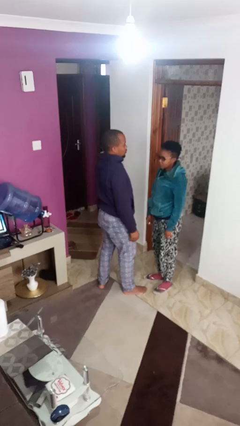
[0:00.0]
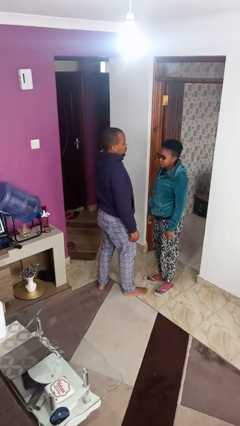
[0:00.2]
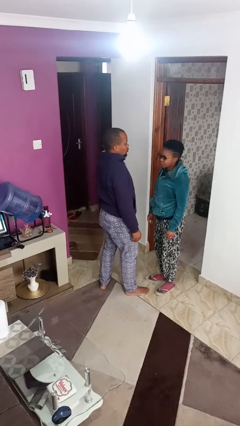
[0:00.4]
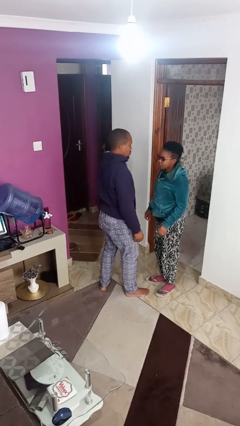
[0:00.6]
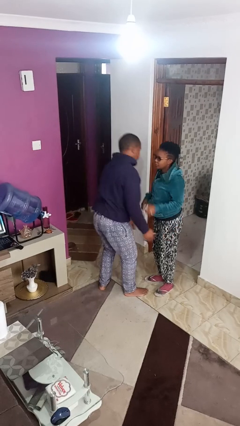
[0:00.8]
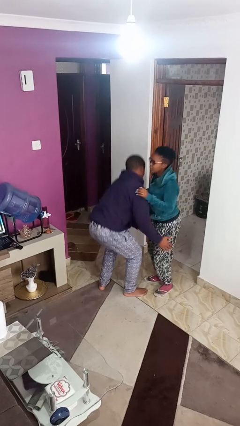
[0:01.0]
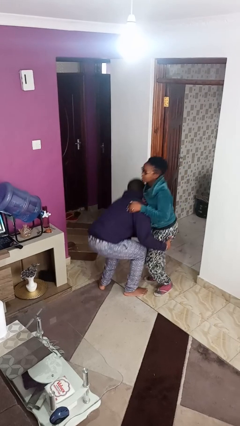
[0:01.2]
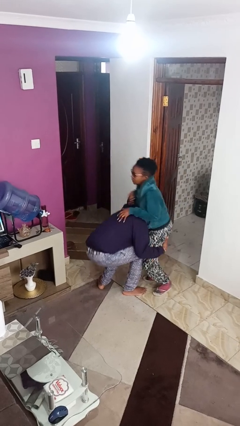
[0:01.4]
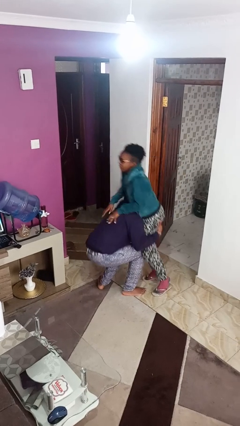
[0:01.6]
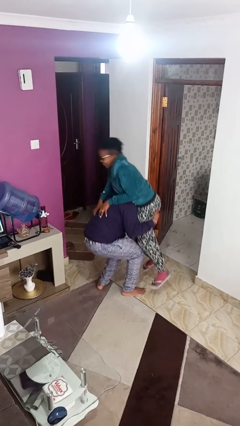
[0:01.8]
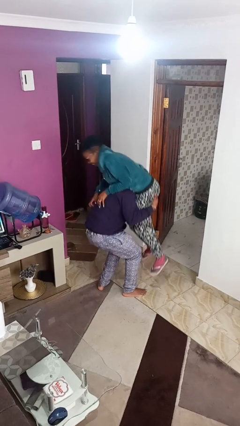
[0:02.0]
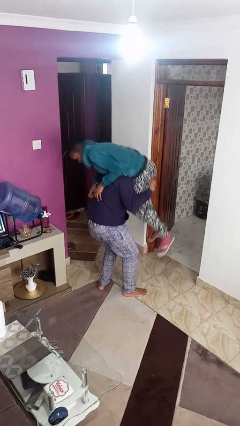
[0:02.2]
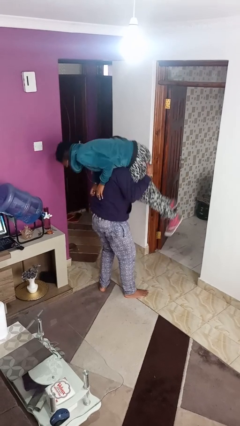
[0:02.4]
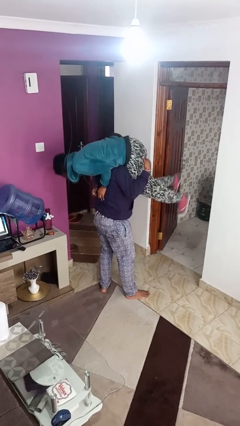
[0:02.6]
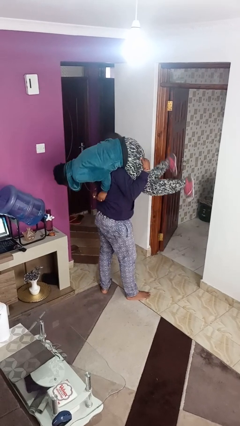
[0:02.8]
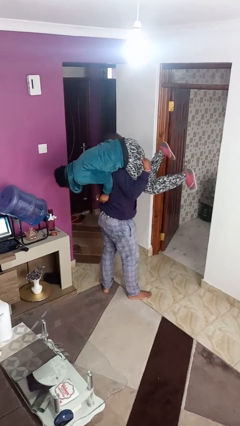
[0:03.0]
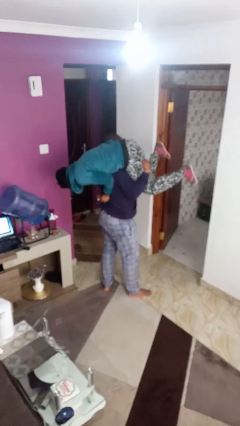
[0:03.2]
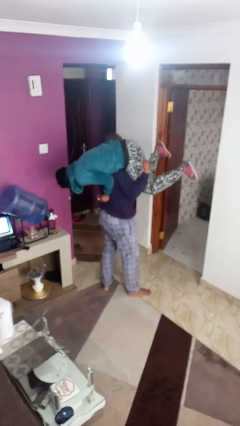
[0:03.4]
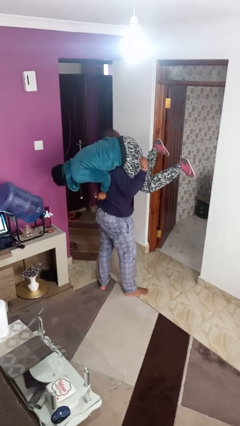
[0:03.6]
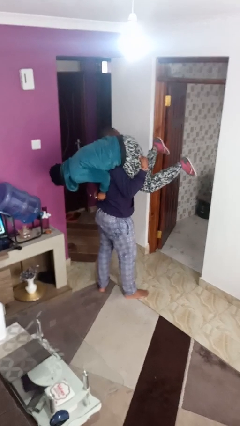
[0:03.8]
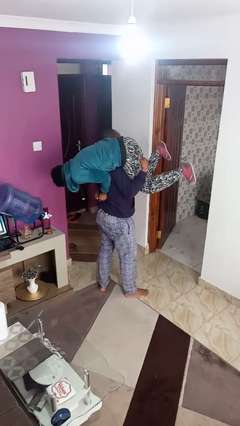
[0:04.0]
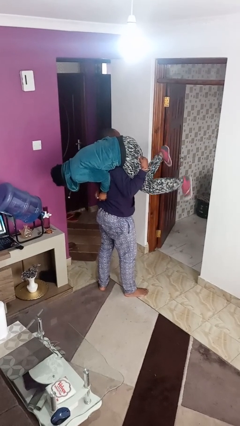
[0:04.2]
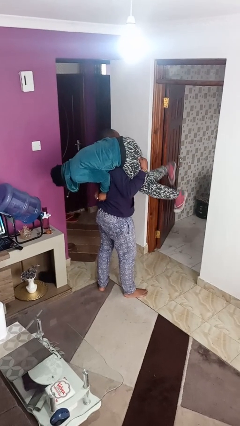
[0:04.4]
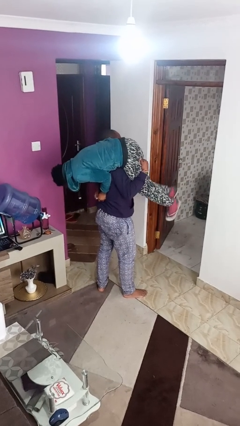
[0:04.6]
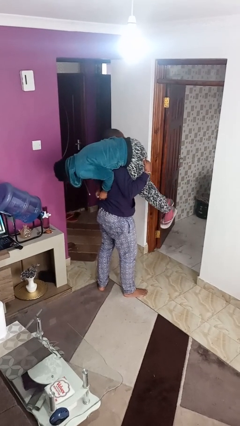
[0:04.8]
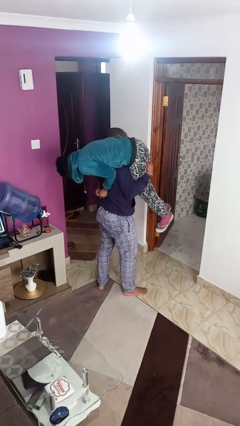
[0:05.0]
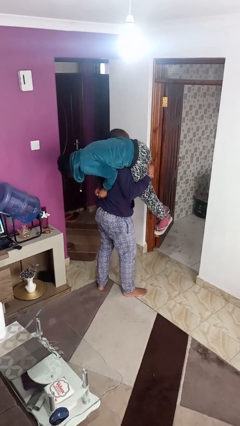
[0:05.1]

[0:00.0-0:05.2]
person carries person over shoulder

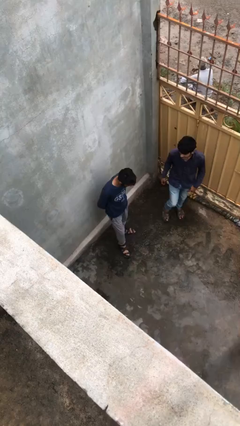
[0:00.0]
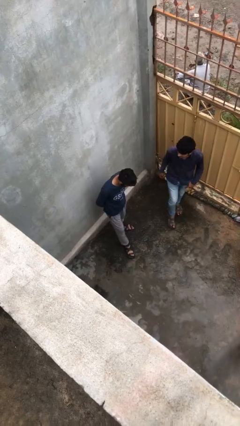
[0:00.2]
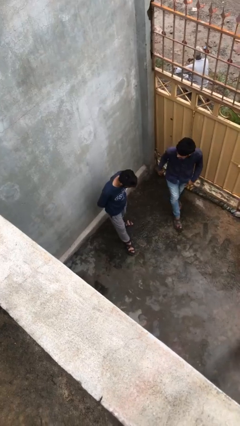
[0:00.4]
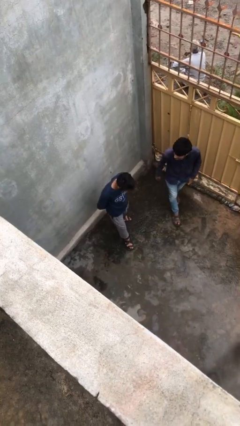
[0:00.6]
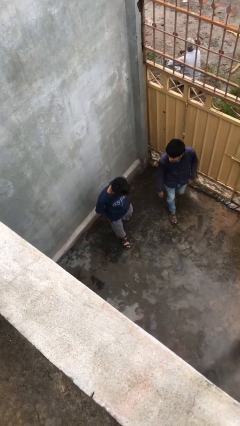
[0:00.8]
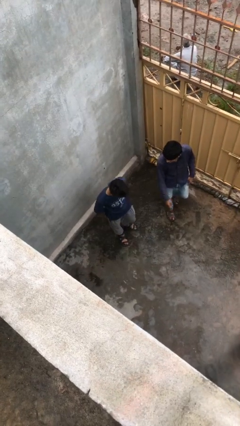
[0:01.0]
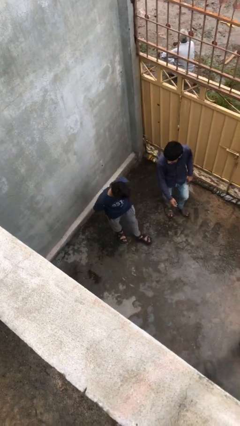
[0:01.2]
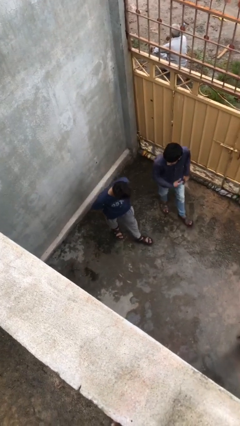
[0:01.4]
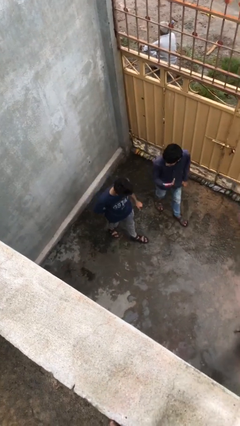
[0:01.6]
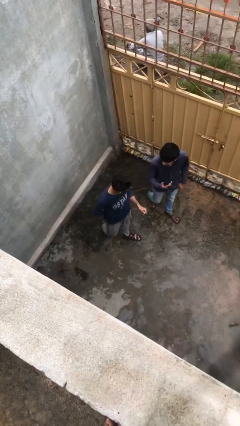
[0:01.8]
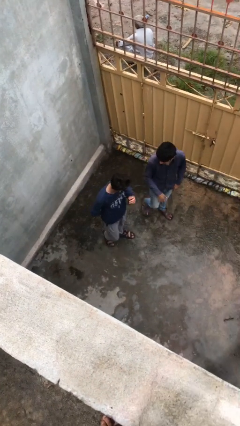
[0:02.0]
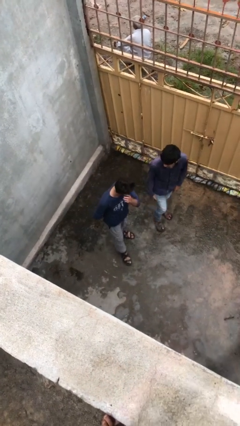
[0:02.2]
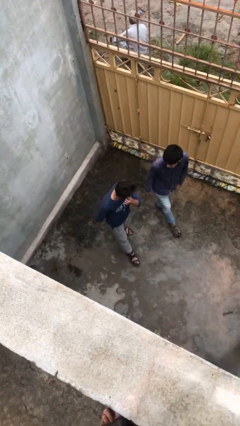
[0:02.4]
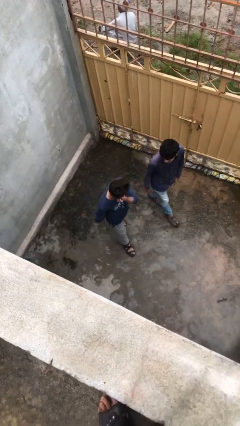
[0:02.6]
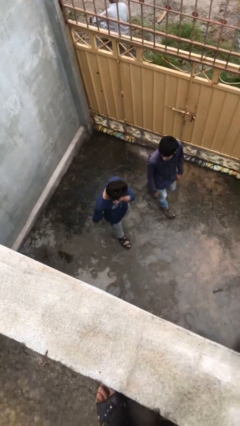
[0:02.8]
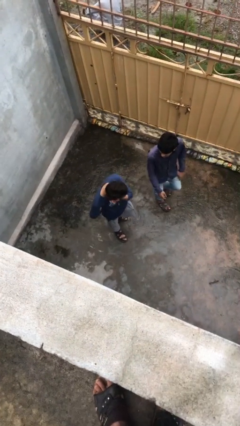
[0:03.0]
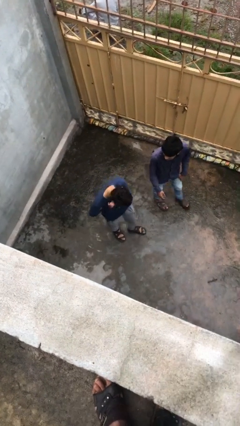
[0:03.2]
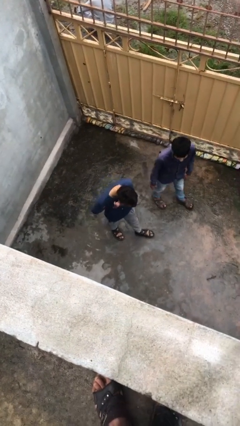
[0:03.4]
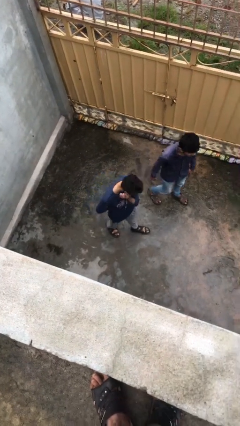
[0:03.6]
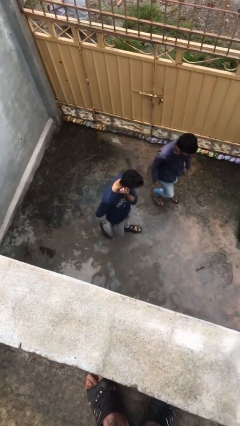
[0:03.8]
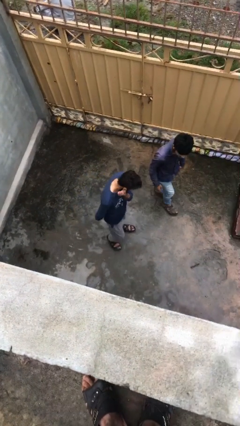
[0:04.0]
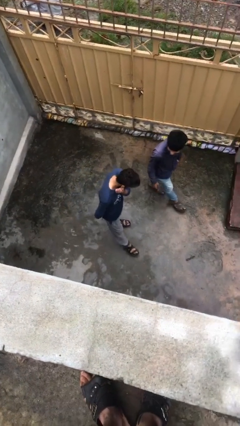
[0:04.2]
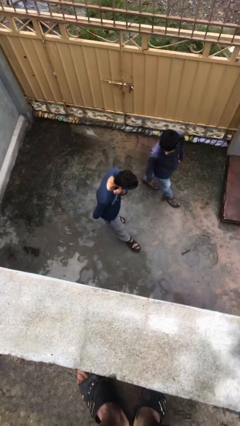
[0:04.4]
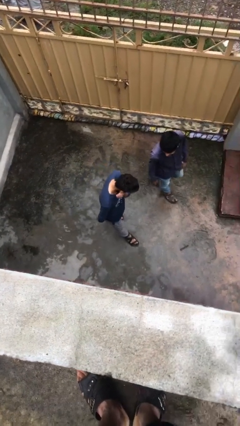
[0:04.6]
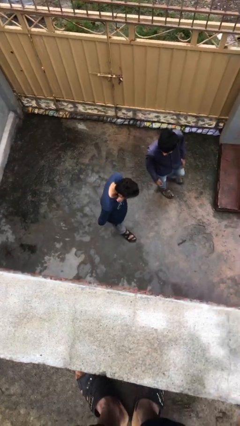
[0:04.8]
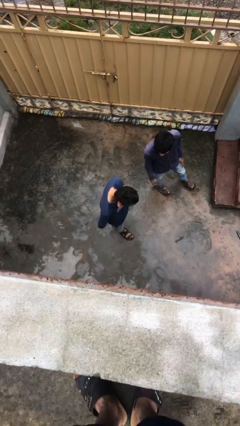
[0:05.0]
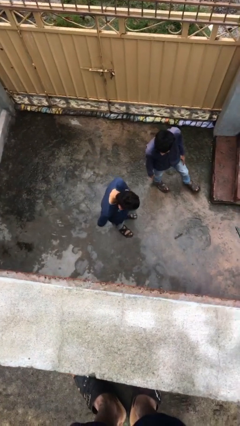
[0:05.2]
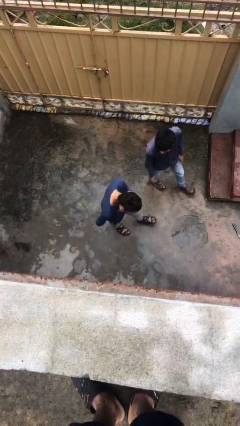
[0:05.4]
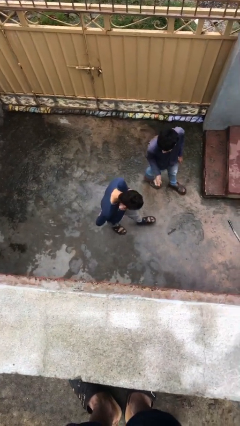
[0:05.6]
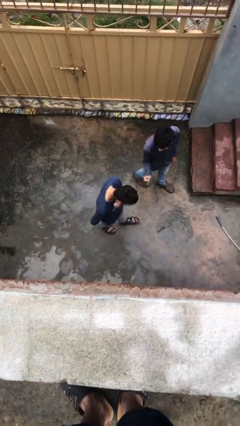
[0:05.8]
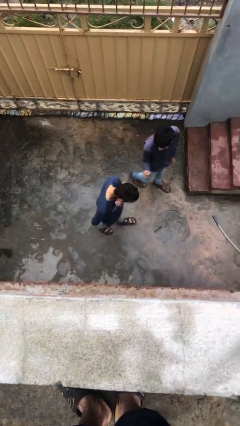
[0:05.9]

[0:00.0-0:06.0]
person talks to person

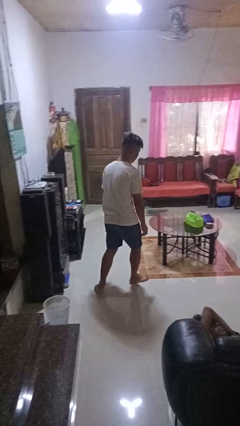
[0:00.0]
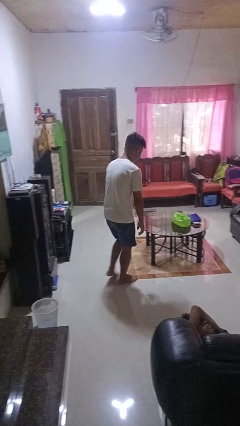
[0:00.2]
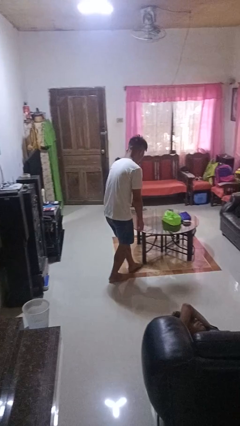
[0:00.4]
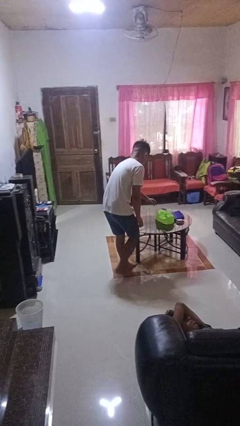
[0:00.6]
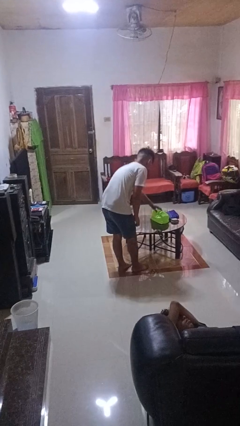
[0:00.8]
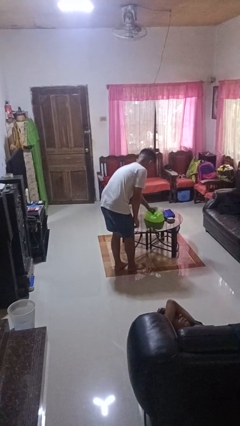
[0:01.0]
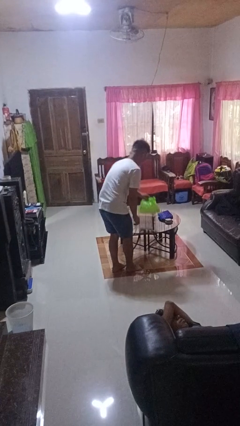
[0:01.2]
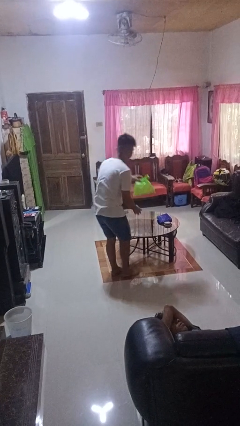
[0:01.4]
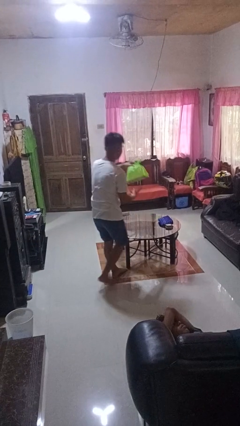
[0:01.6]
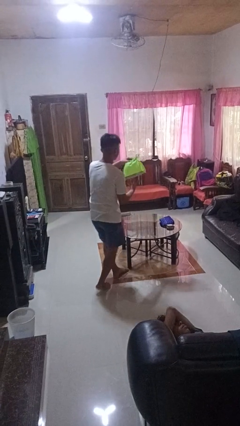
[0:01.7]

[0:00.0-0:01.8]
person picks up object from table

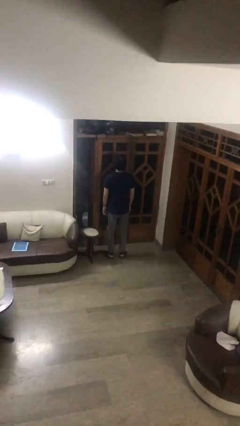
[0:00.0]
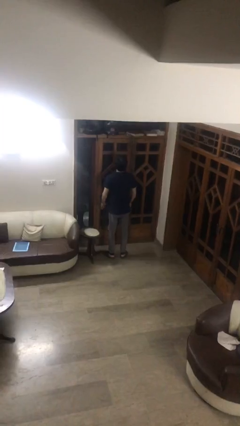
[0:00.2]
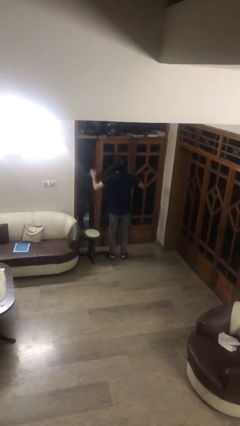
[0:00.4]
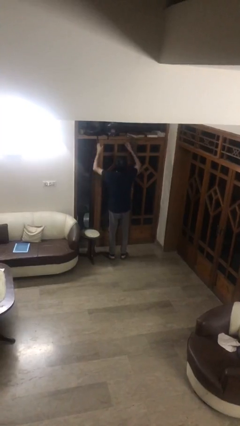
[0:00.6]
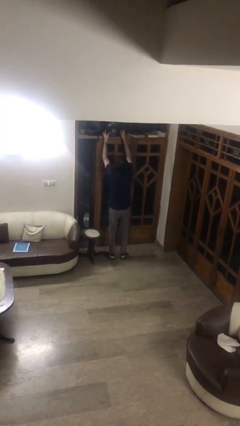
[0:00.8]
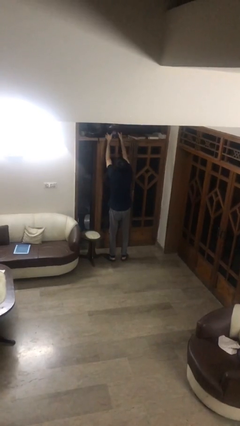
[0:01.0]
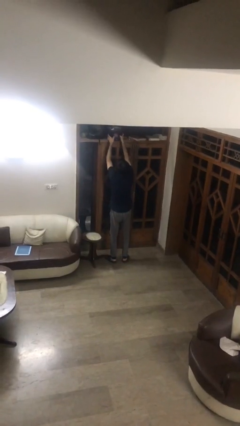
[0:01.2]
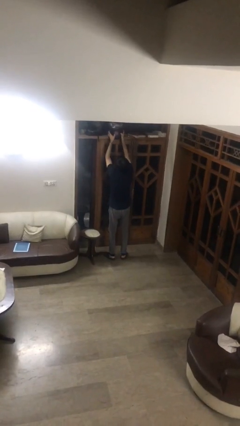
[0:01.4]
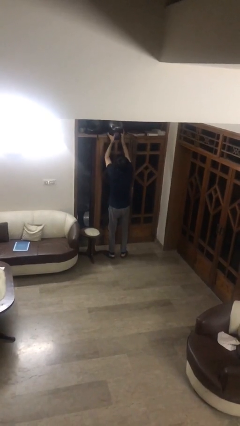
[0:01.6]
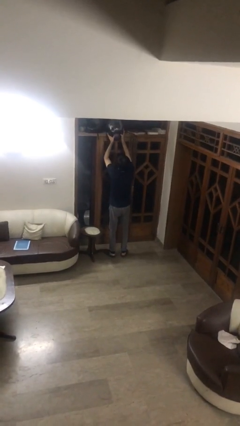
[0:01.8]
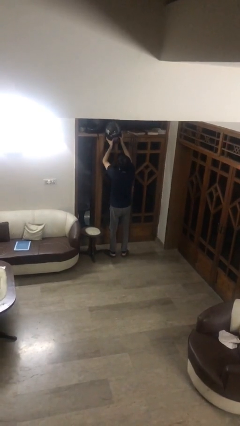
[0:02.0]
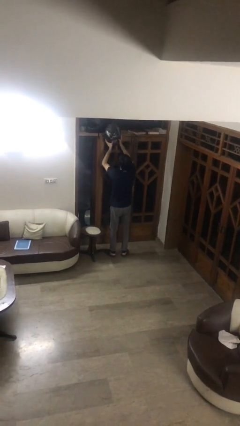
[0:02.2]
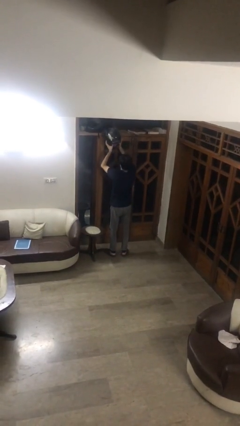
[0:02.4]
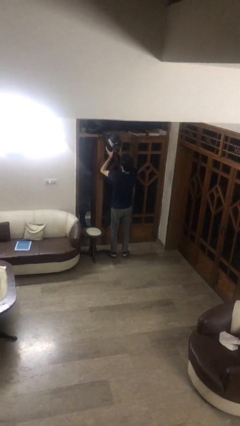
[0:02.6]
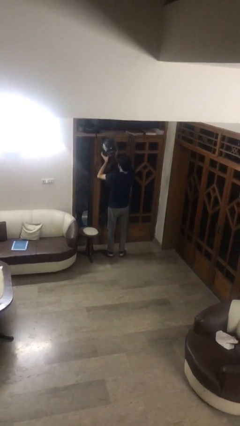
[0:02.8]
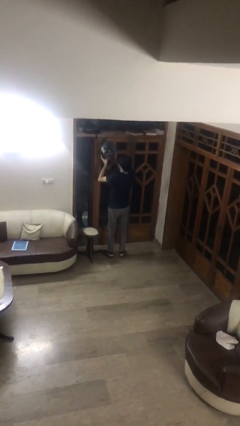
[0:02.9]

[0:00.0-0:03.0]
person picks up object from shelf

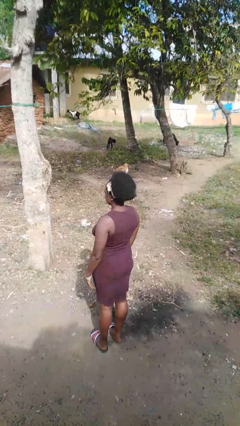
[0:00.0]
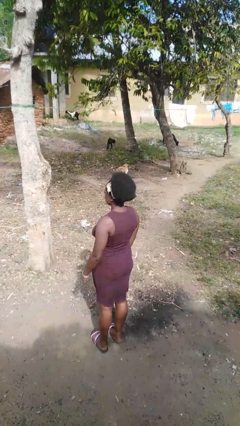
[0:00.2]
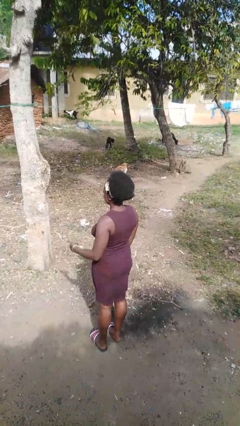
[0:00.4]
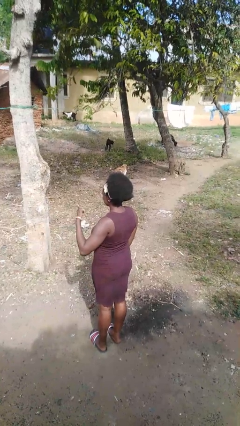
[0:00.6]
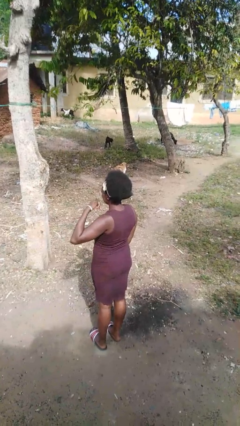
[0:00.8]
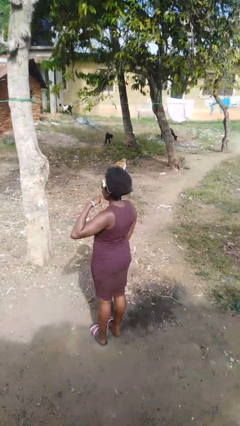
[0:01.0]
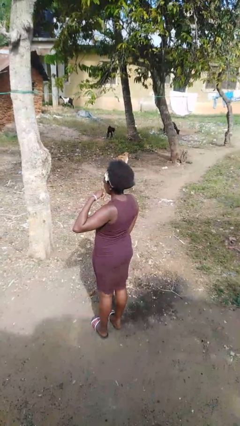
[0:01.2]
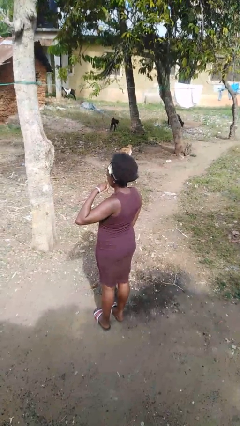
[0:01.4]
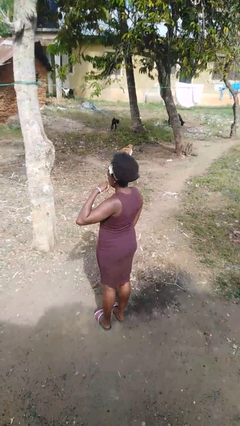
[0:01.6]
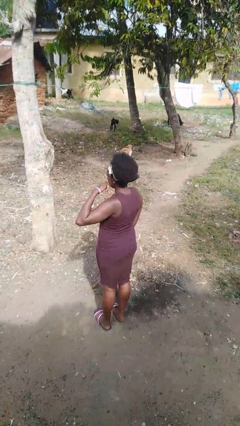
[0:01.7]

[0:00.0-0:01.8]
person gestures call me

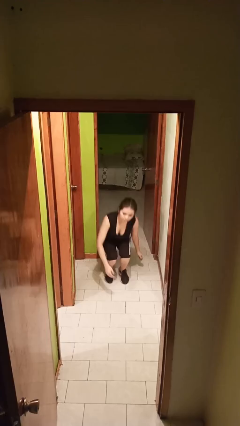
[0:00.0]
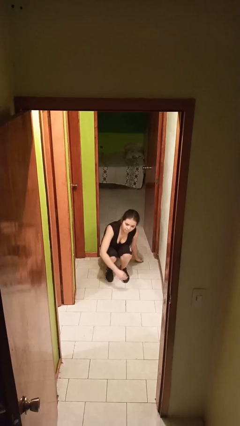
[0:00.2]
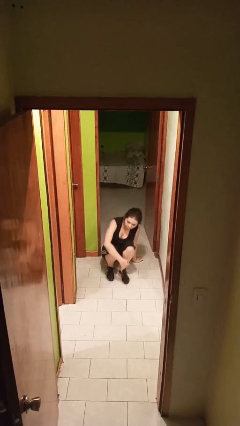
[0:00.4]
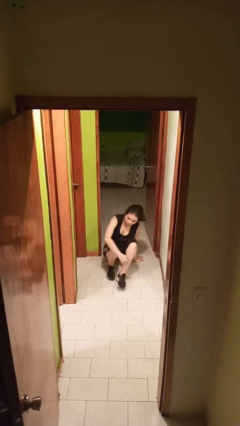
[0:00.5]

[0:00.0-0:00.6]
person sits down
